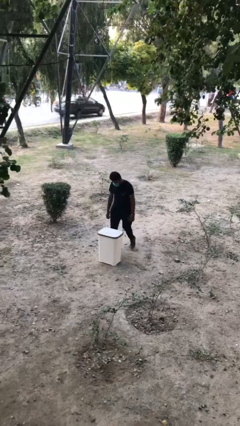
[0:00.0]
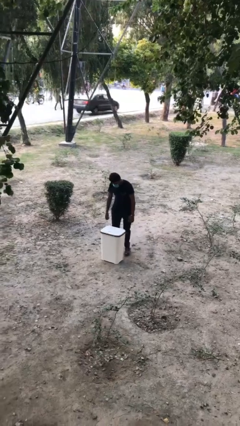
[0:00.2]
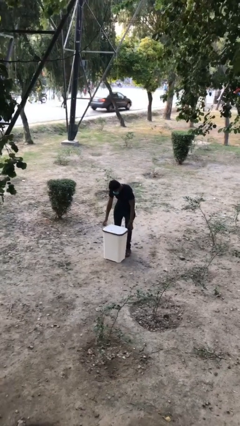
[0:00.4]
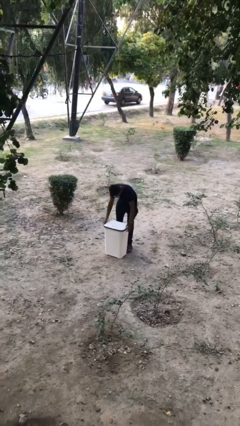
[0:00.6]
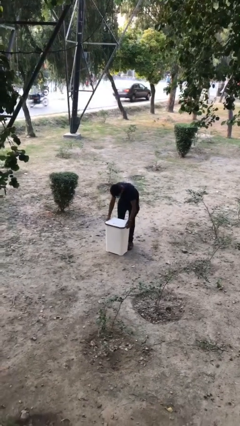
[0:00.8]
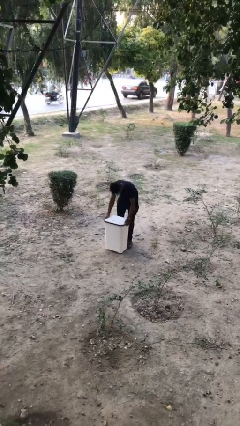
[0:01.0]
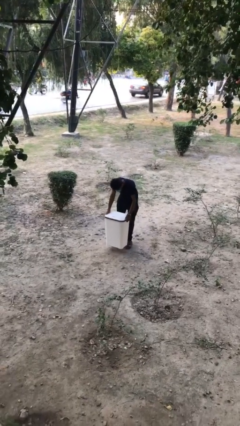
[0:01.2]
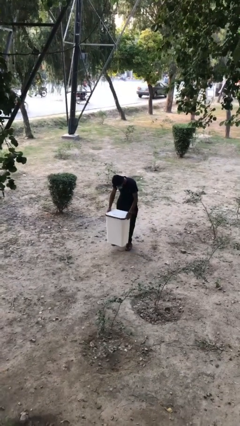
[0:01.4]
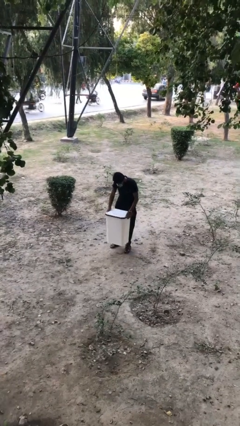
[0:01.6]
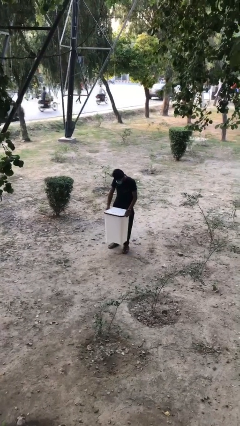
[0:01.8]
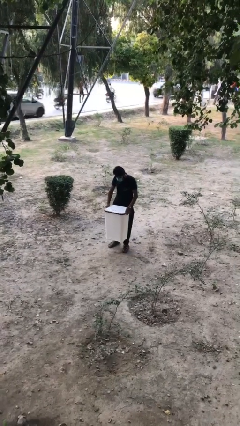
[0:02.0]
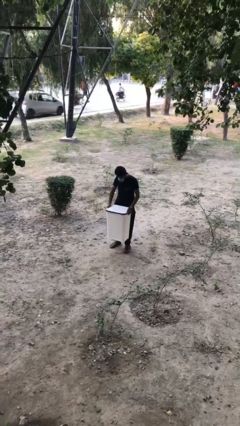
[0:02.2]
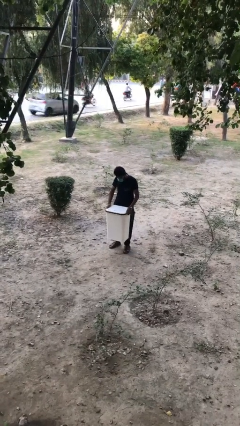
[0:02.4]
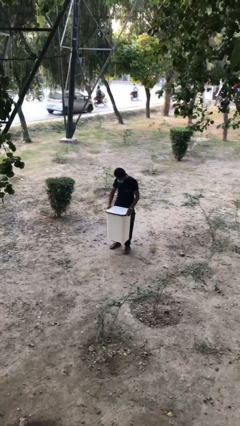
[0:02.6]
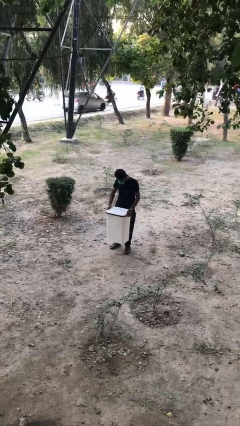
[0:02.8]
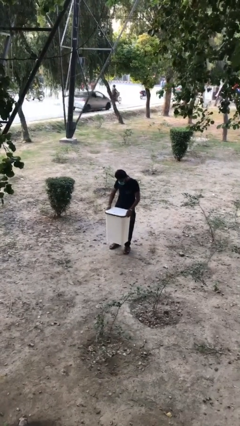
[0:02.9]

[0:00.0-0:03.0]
person picks up object from floor

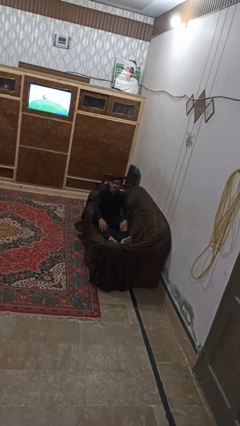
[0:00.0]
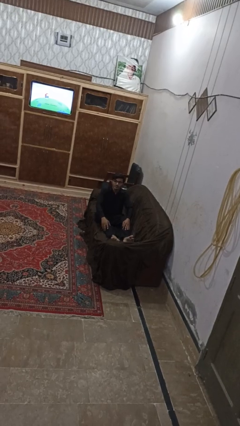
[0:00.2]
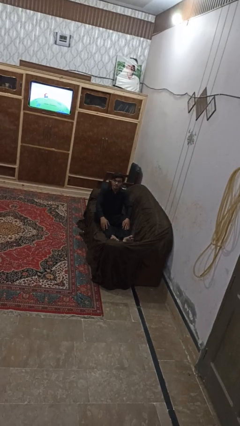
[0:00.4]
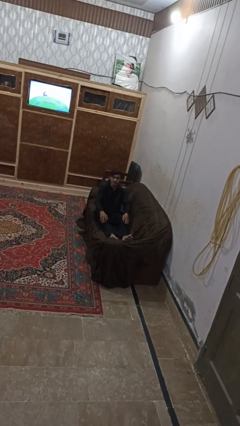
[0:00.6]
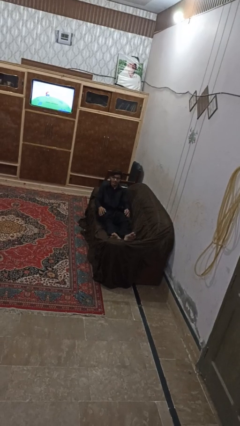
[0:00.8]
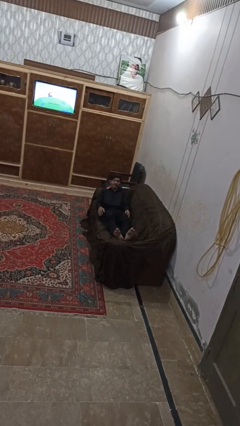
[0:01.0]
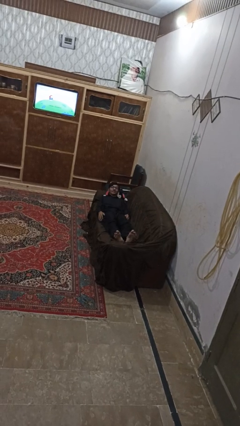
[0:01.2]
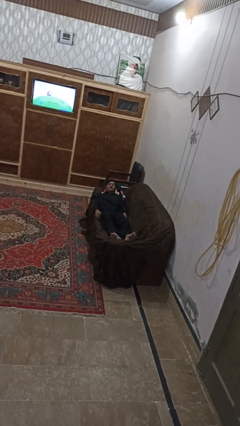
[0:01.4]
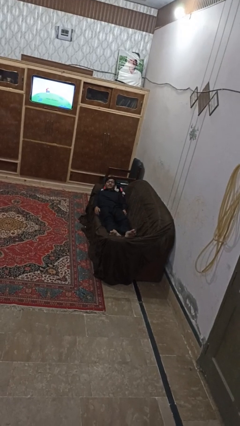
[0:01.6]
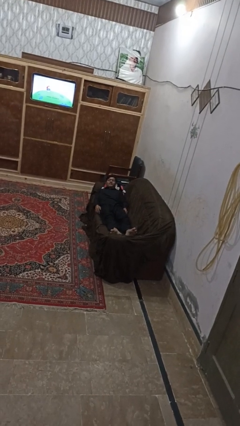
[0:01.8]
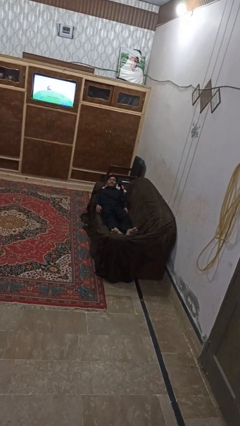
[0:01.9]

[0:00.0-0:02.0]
person lies down on couch

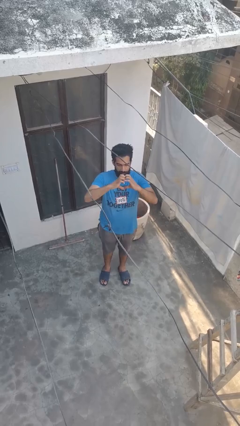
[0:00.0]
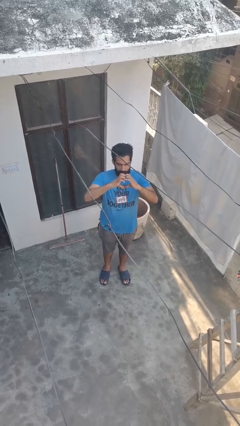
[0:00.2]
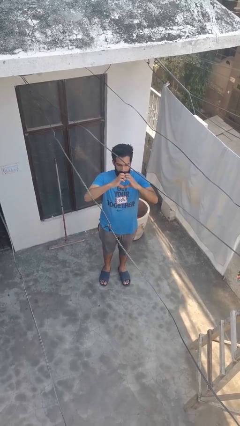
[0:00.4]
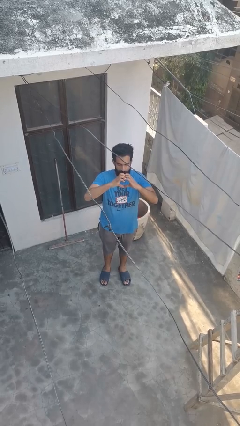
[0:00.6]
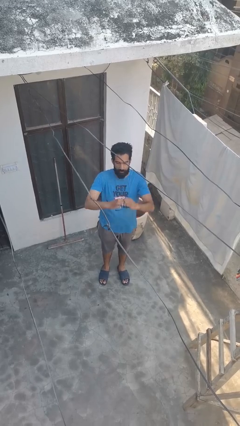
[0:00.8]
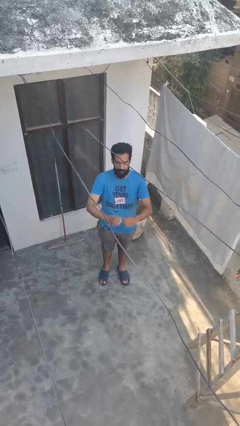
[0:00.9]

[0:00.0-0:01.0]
person gestures heart

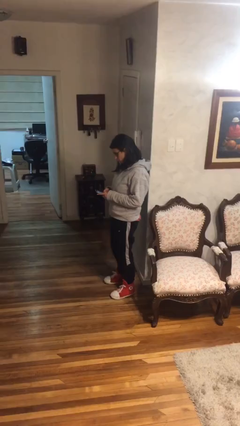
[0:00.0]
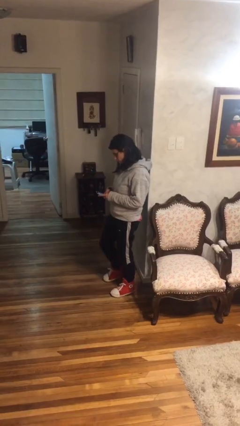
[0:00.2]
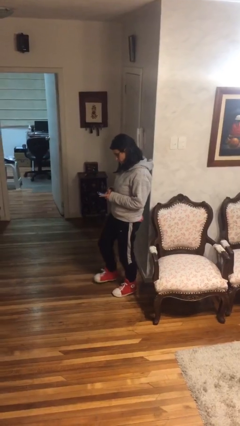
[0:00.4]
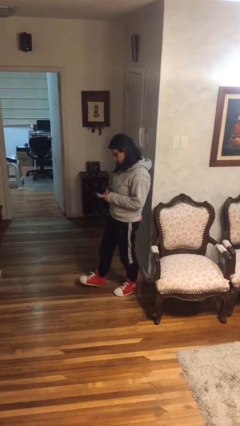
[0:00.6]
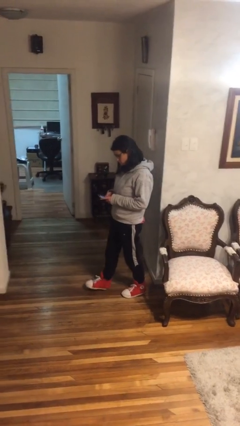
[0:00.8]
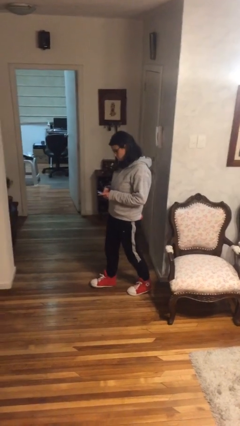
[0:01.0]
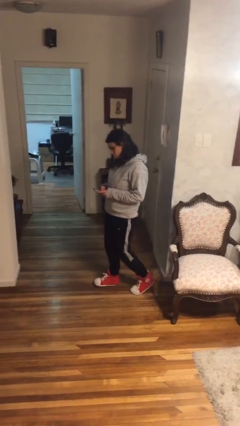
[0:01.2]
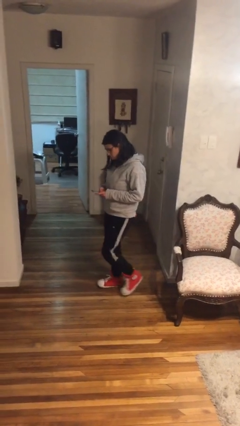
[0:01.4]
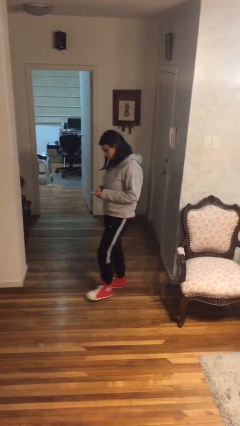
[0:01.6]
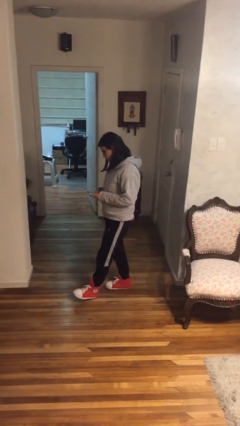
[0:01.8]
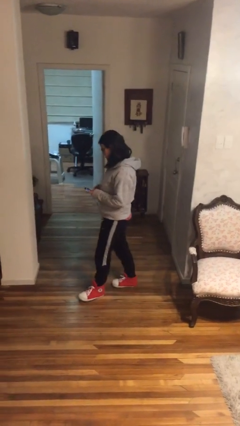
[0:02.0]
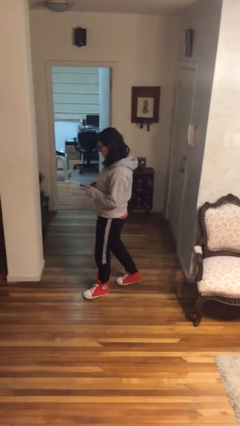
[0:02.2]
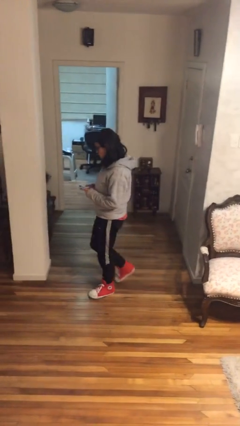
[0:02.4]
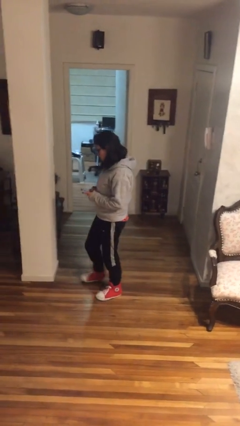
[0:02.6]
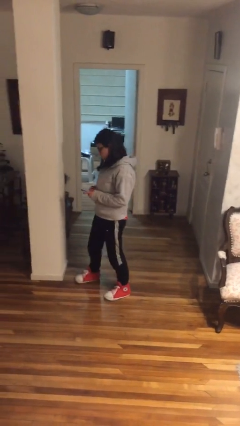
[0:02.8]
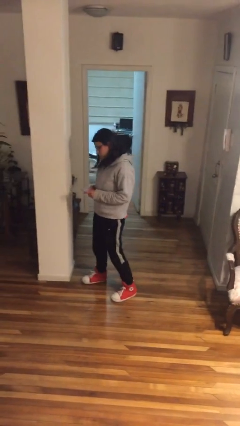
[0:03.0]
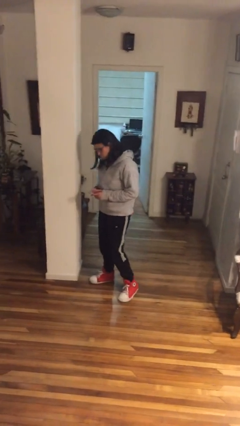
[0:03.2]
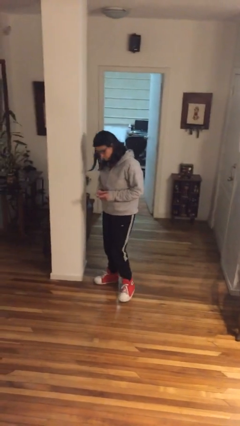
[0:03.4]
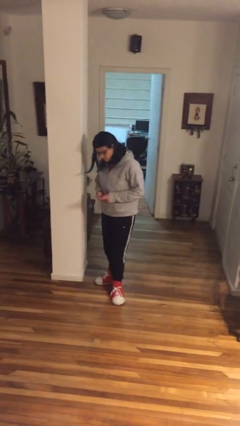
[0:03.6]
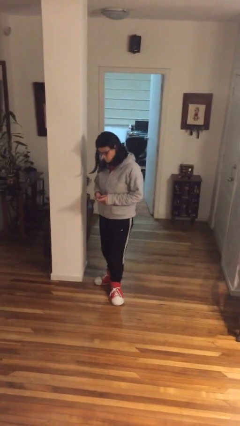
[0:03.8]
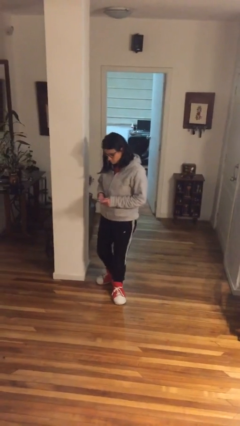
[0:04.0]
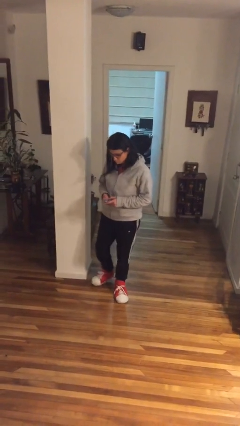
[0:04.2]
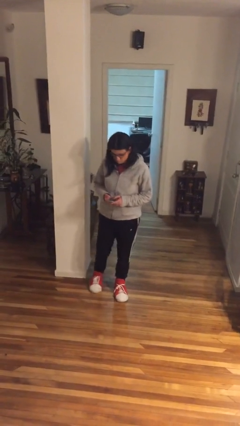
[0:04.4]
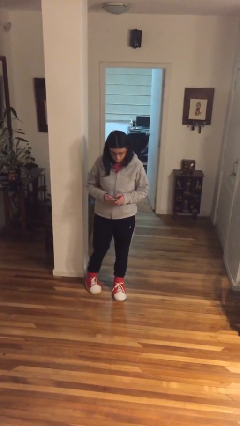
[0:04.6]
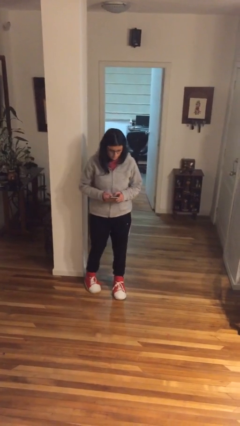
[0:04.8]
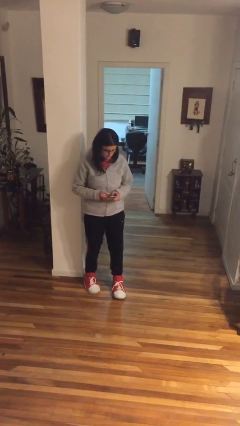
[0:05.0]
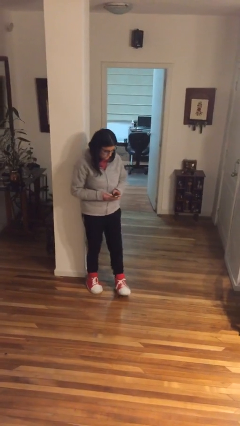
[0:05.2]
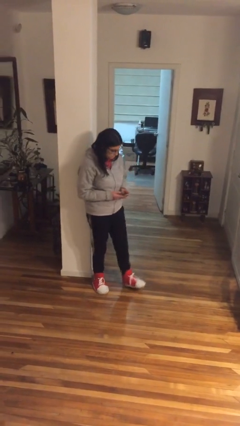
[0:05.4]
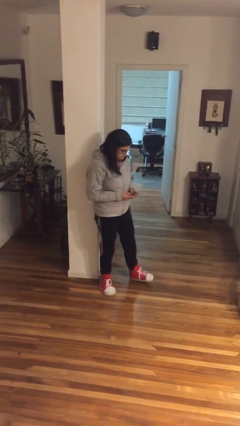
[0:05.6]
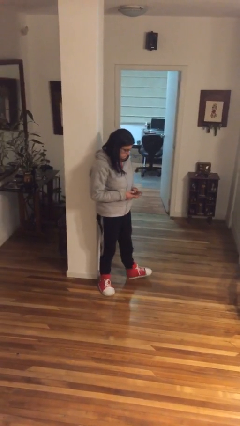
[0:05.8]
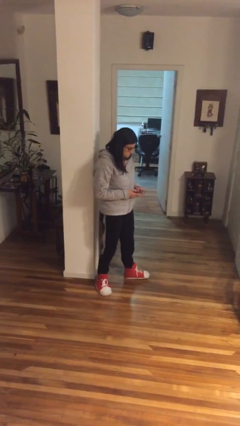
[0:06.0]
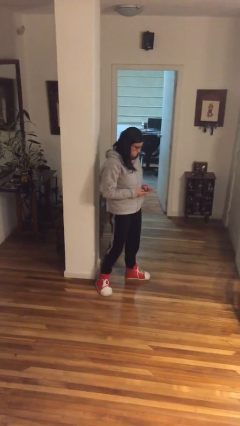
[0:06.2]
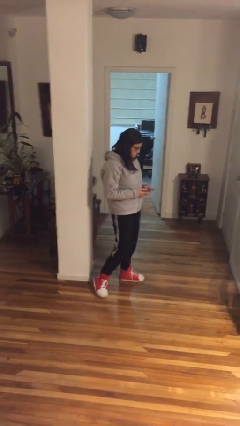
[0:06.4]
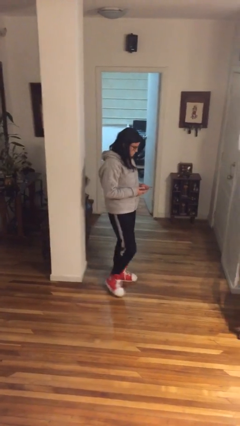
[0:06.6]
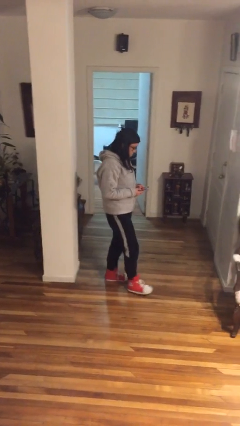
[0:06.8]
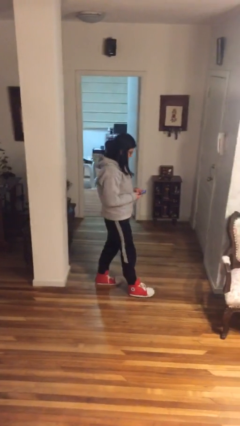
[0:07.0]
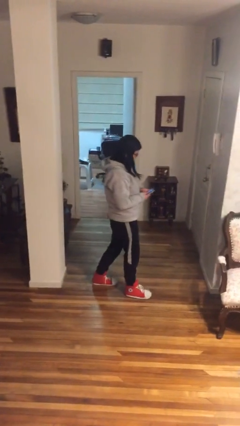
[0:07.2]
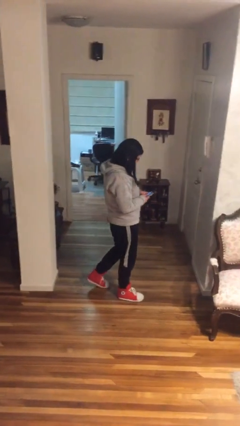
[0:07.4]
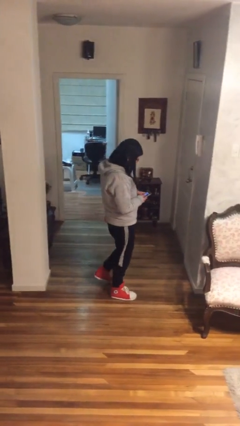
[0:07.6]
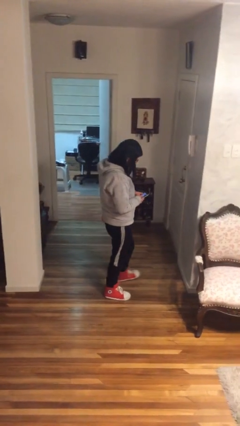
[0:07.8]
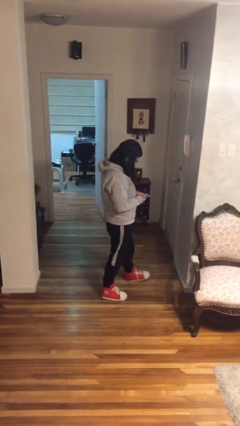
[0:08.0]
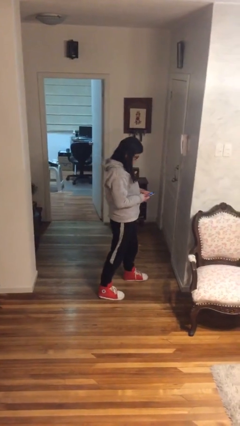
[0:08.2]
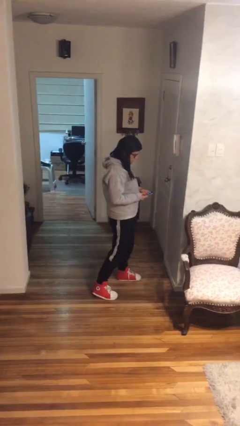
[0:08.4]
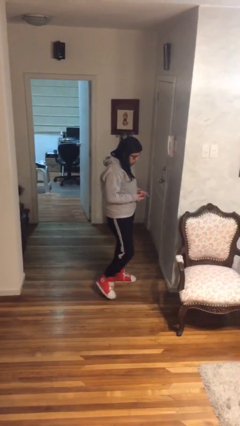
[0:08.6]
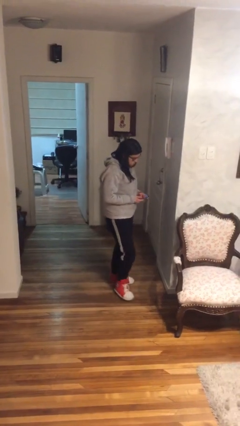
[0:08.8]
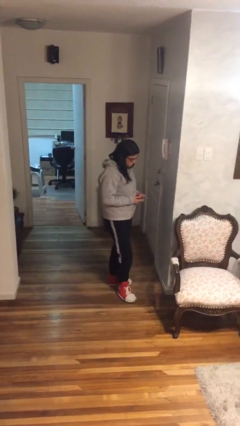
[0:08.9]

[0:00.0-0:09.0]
person texts on phone

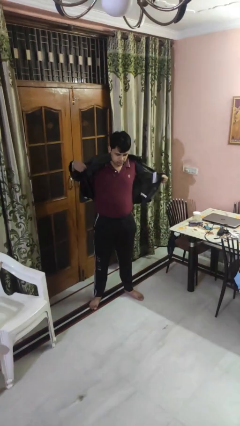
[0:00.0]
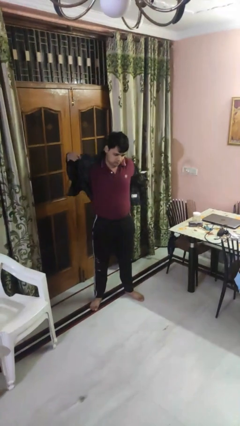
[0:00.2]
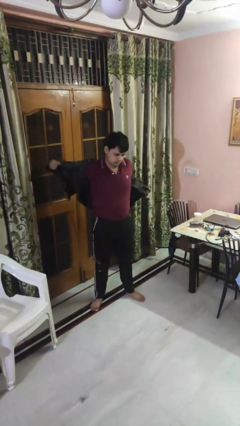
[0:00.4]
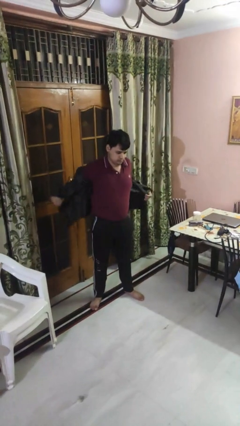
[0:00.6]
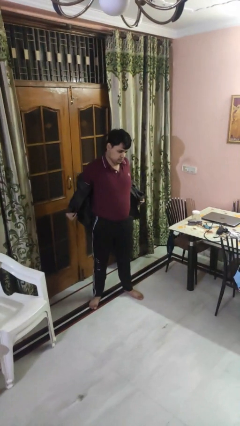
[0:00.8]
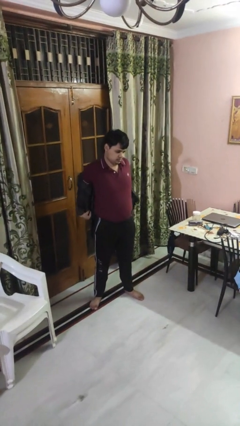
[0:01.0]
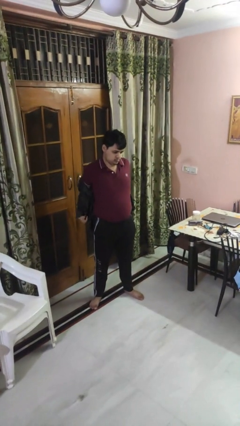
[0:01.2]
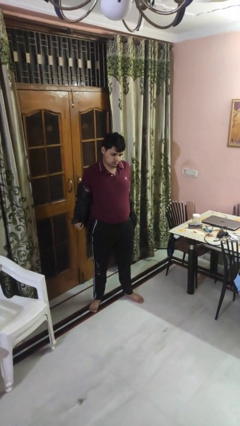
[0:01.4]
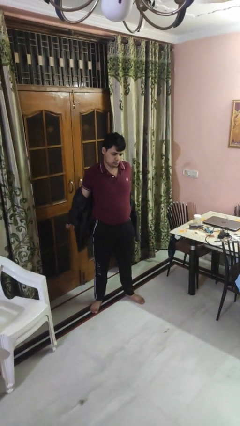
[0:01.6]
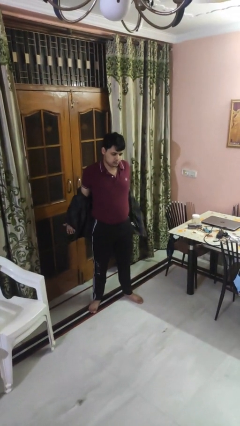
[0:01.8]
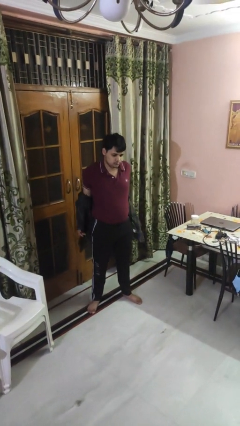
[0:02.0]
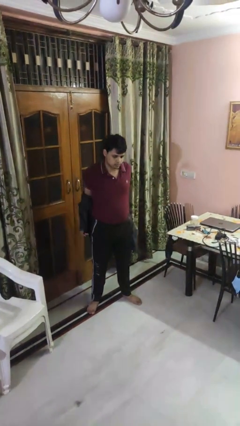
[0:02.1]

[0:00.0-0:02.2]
person takes off shirt

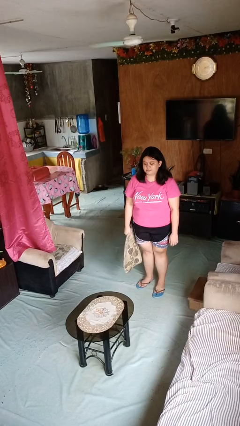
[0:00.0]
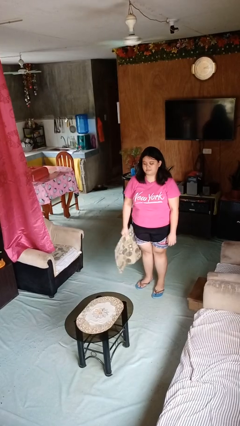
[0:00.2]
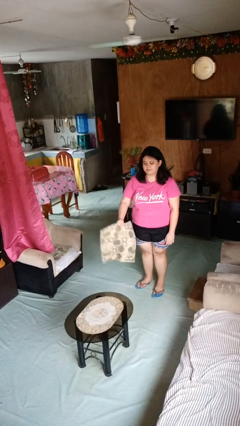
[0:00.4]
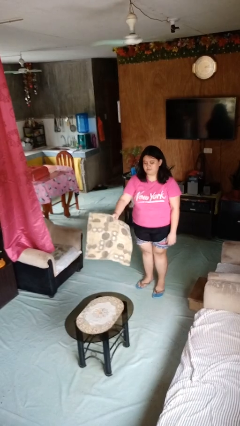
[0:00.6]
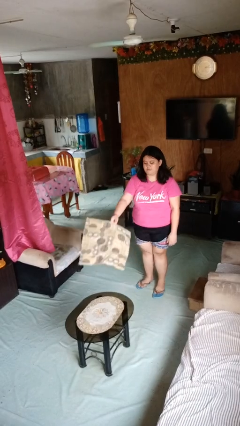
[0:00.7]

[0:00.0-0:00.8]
person throws object on table
